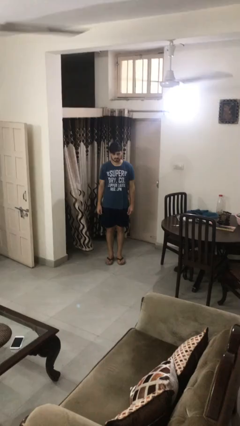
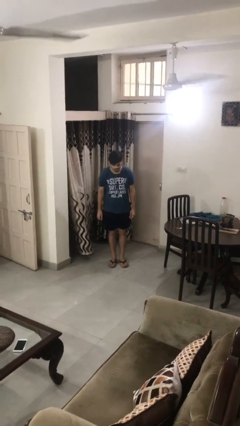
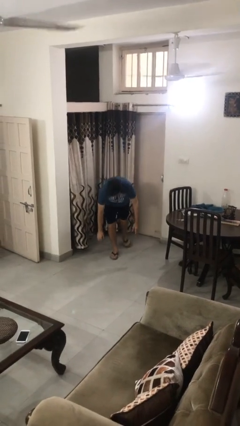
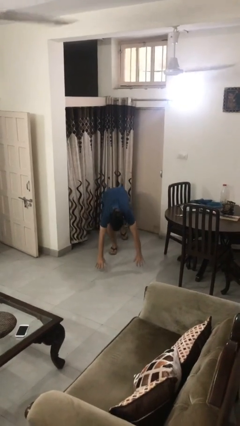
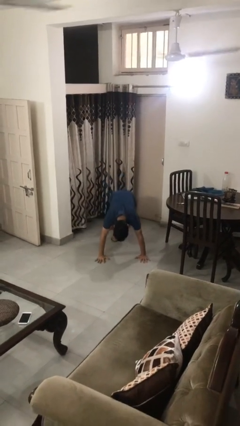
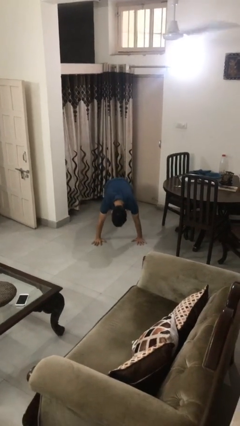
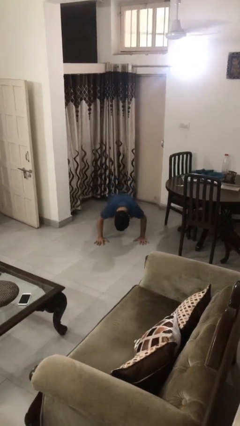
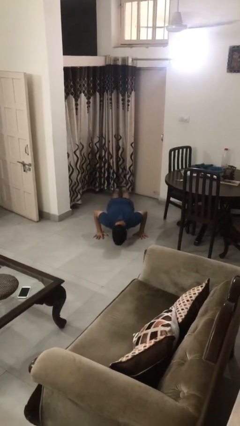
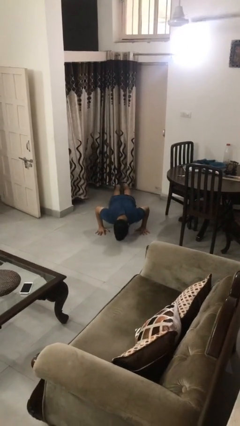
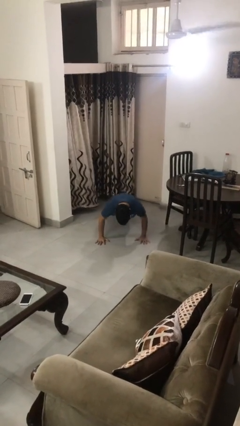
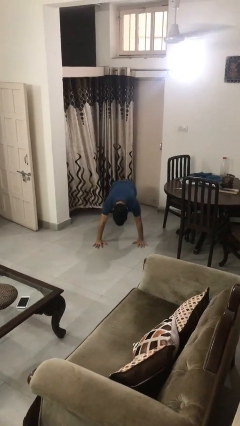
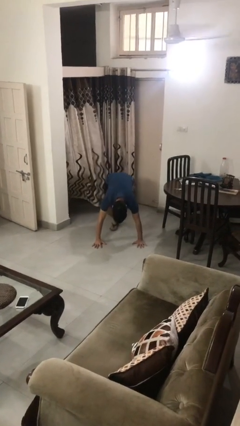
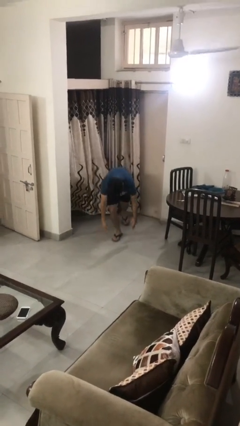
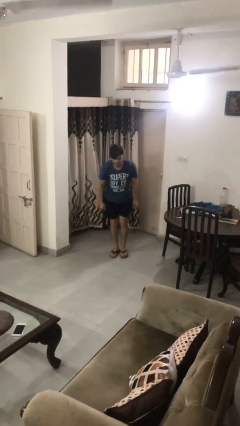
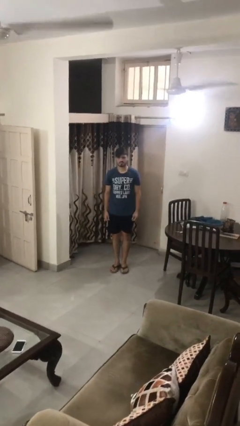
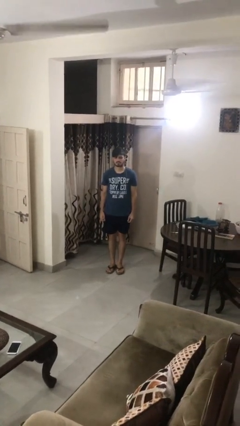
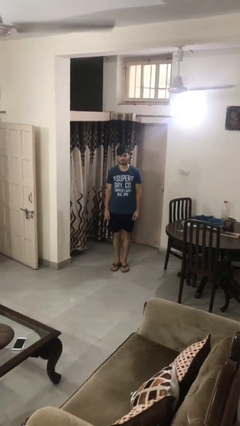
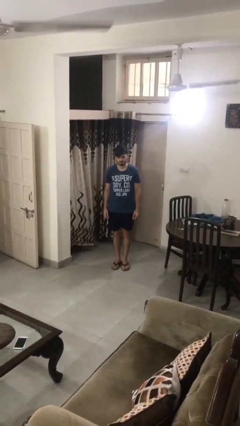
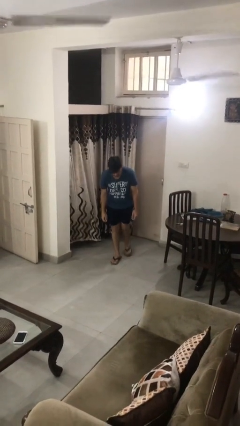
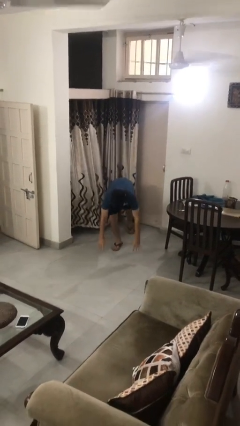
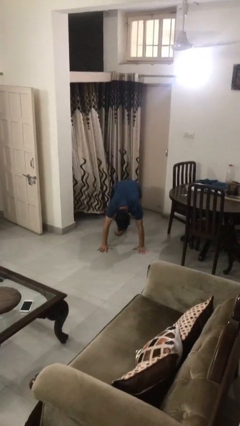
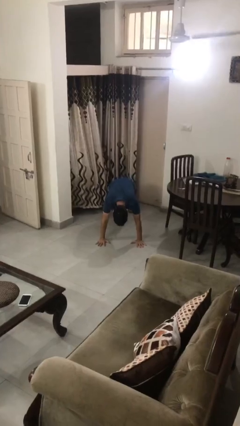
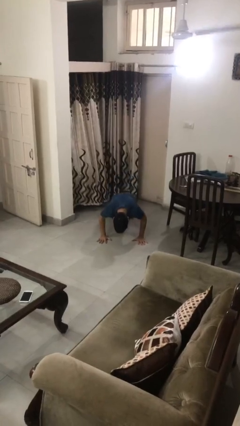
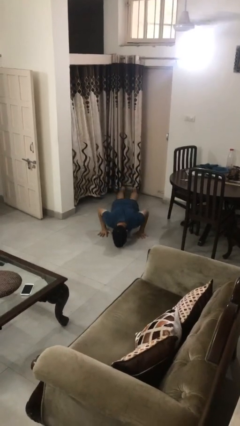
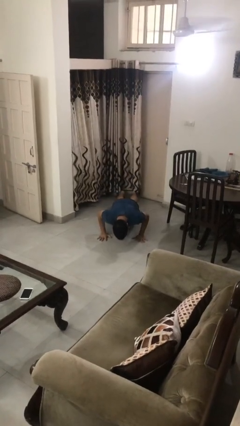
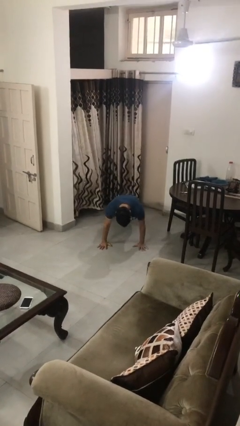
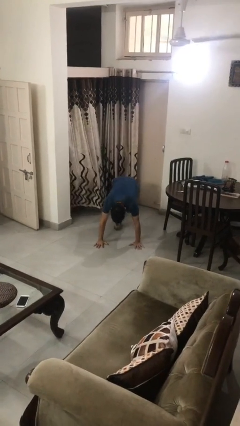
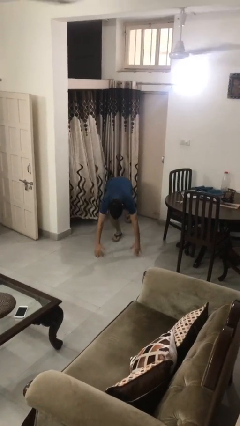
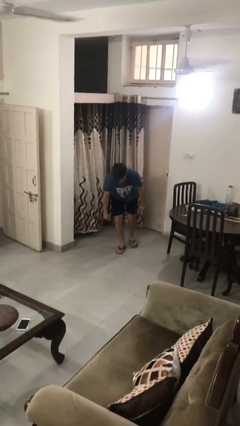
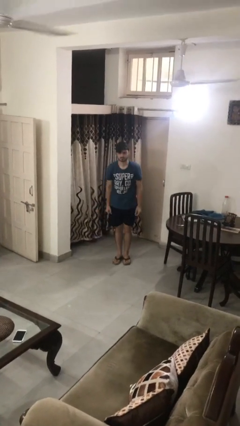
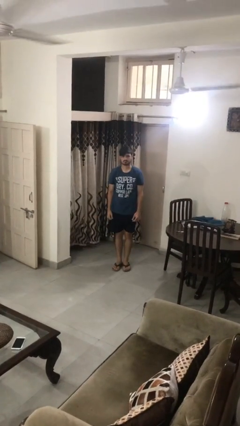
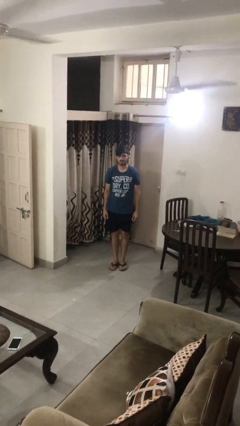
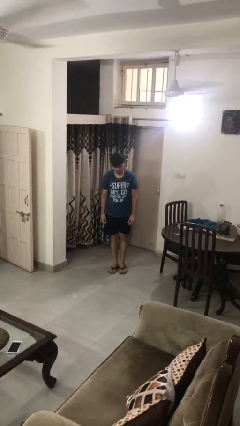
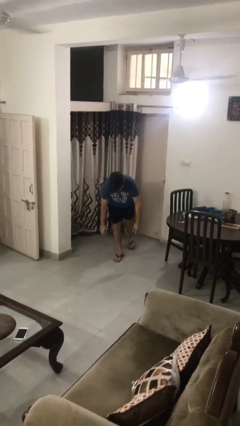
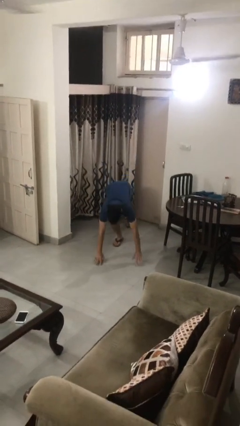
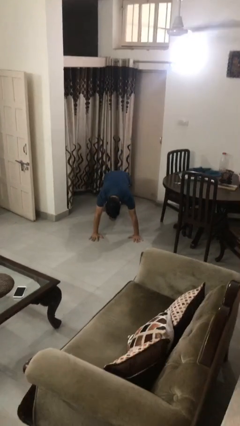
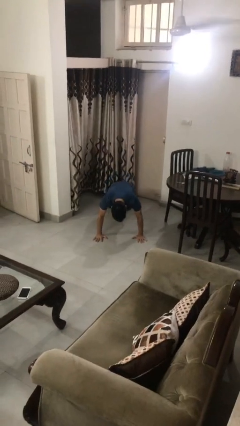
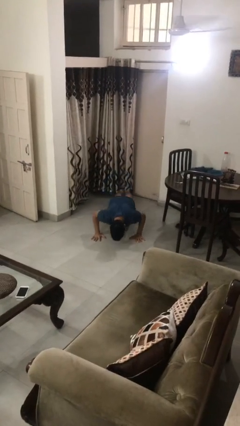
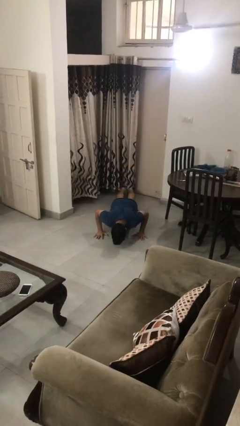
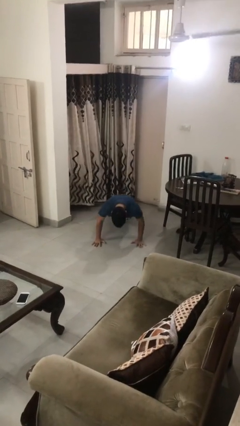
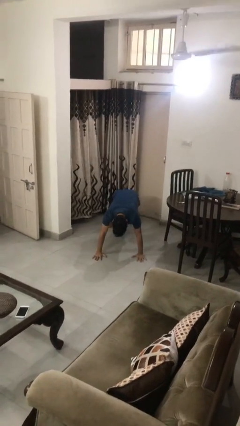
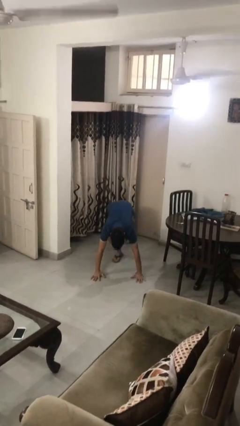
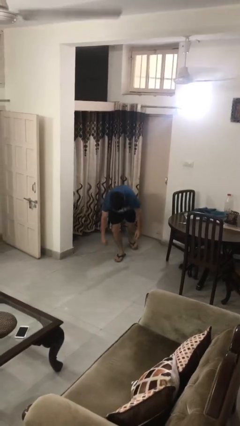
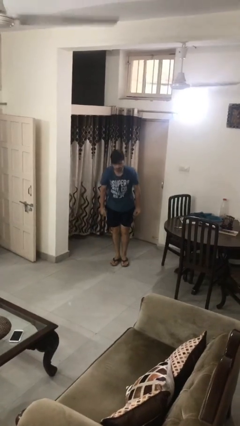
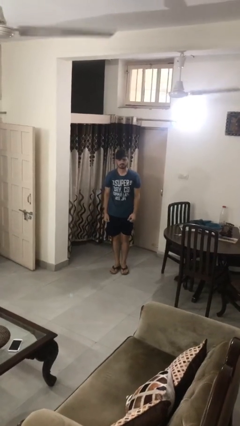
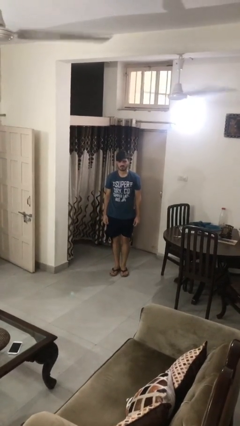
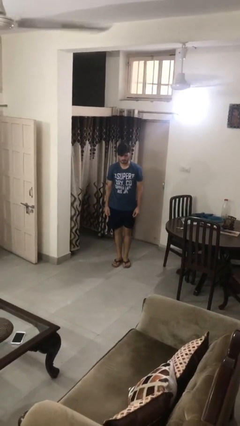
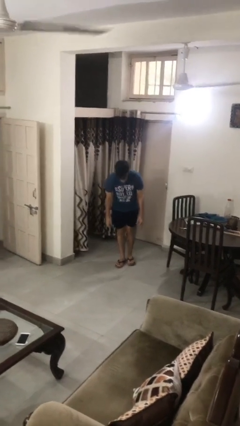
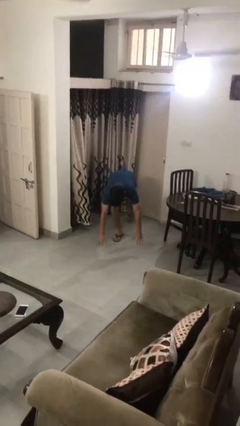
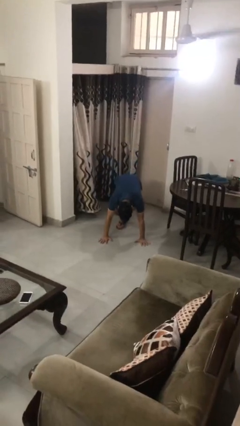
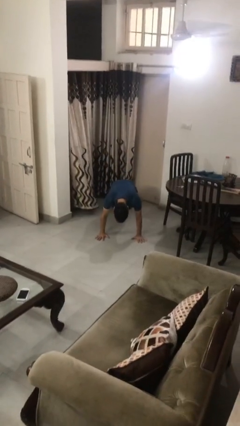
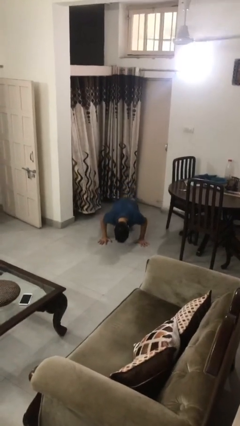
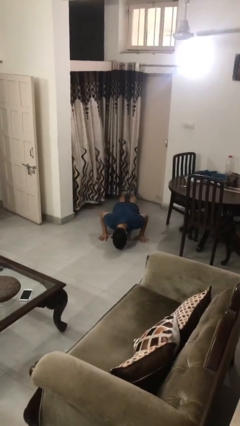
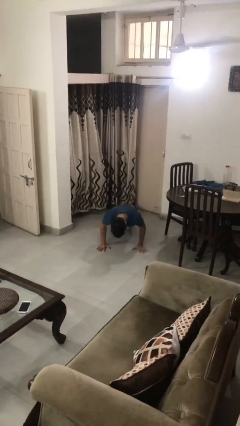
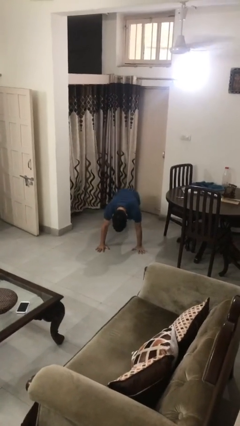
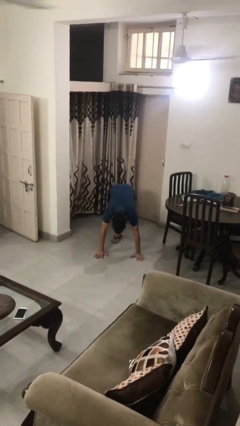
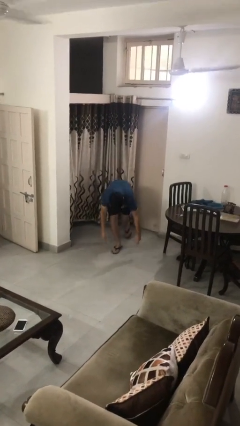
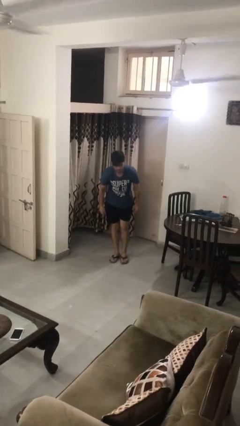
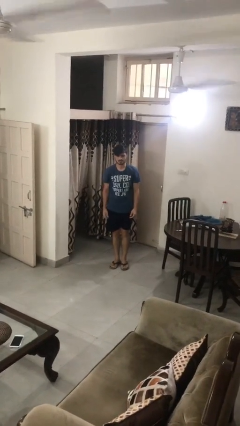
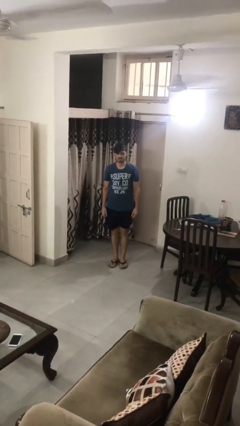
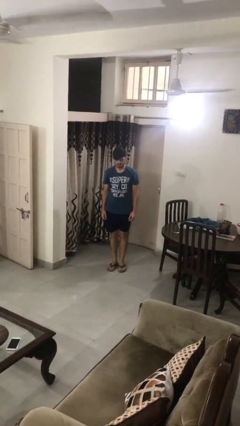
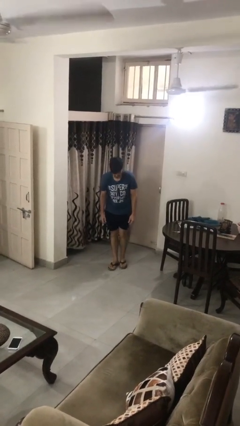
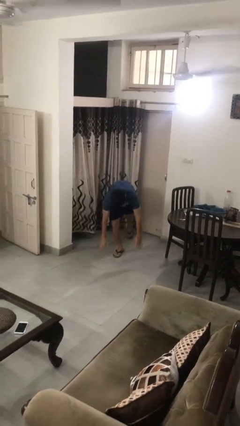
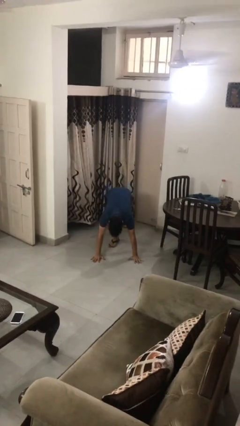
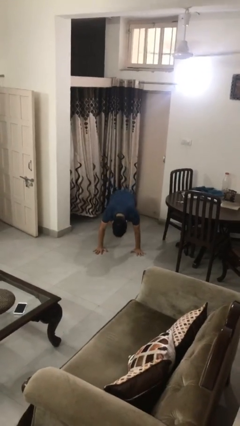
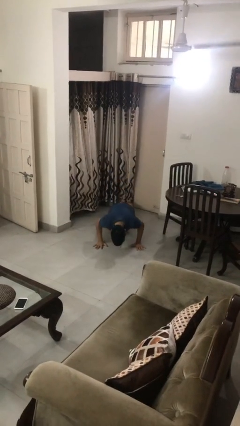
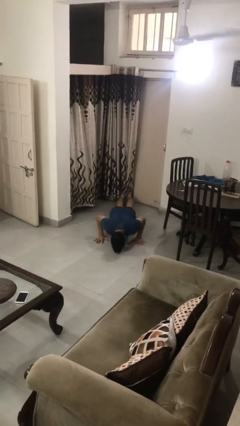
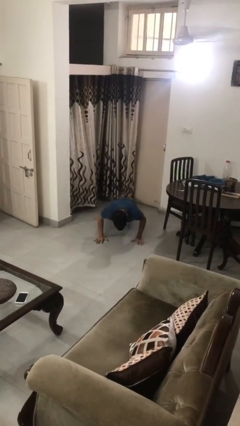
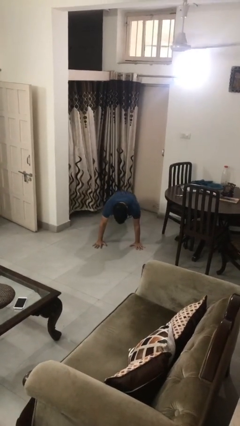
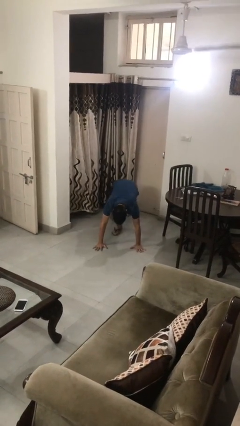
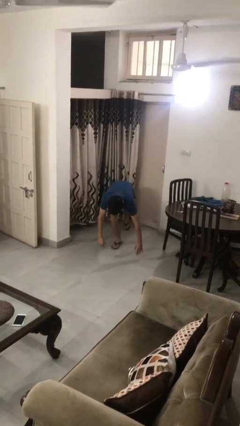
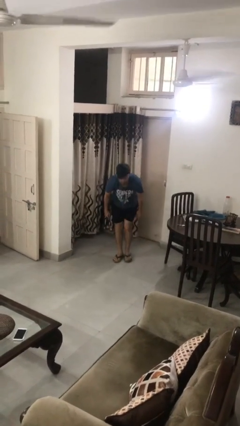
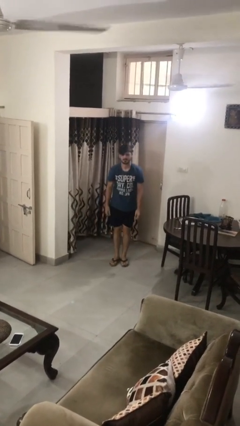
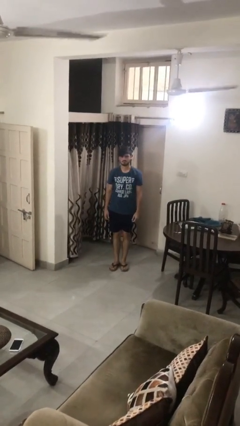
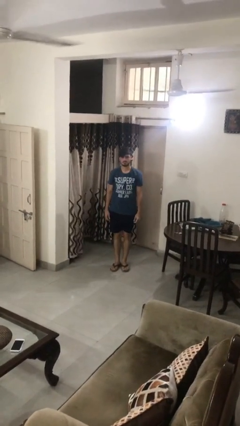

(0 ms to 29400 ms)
person exercises with pushup

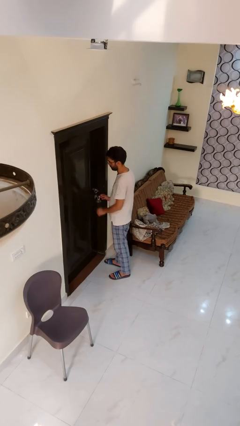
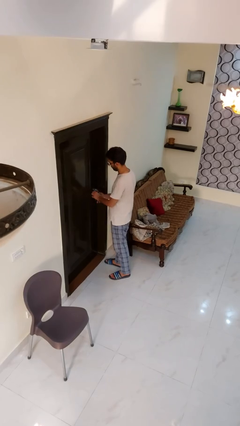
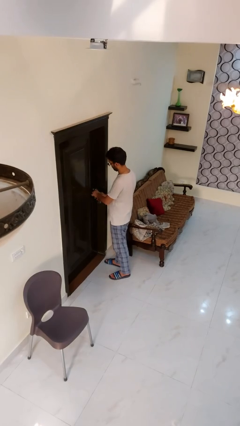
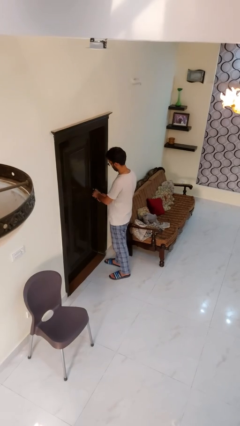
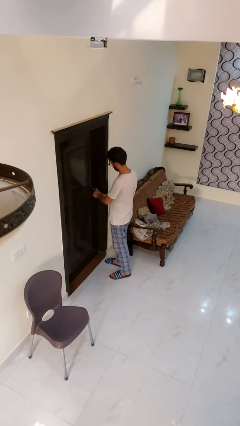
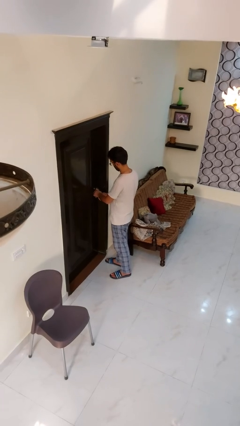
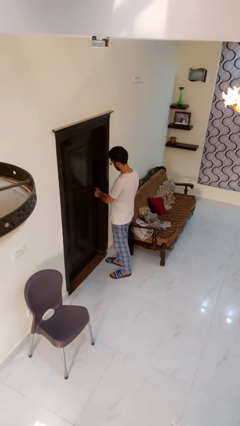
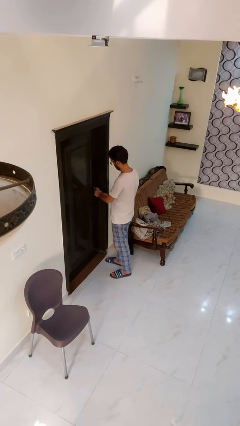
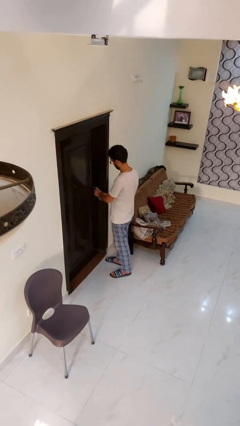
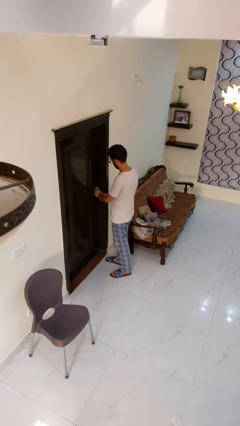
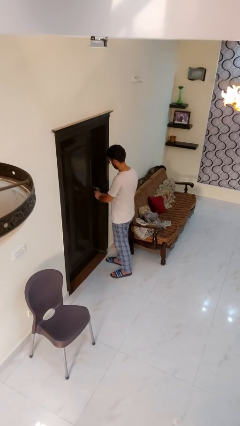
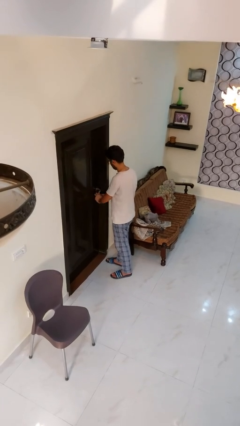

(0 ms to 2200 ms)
person unlocks door with keys

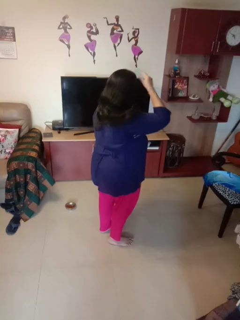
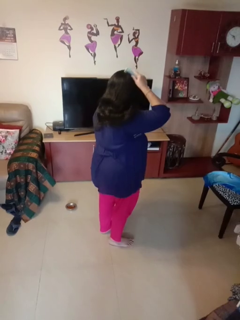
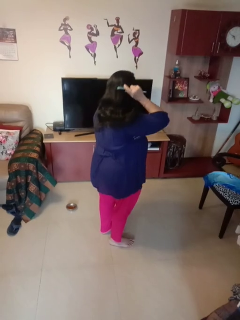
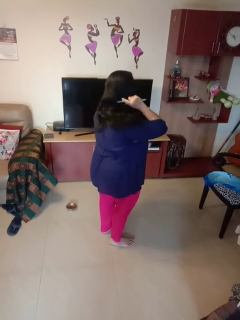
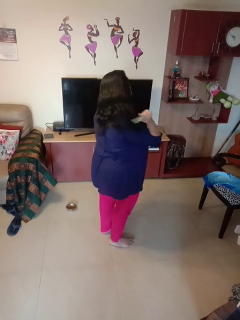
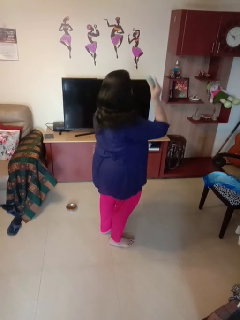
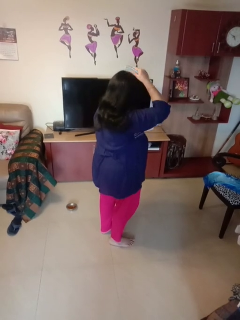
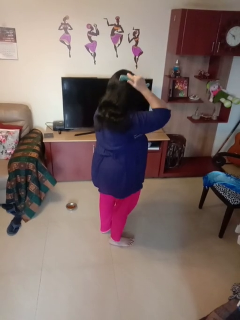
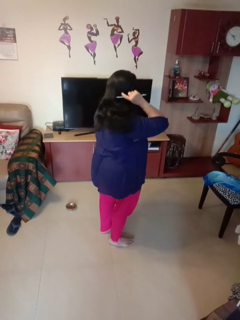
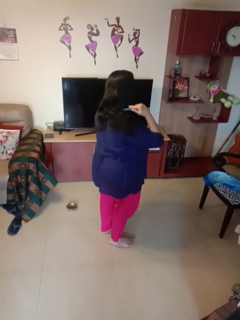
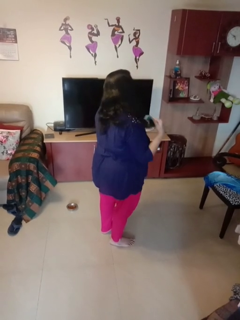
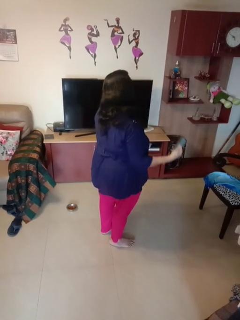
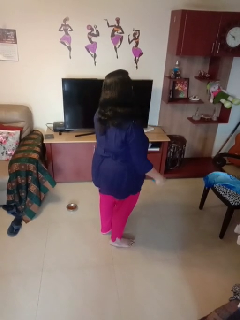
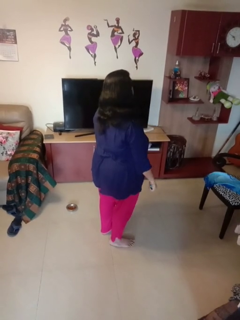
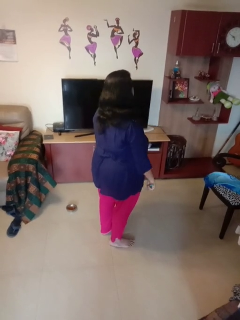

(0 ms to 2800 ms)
person brushes hair
